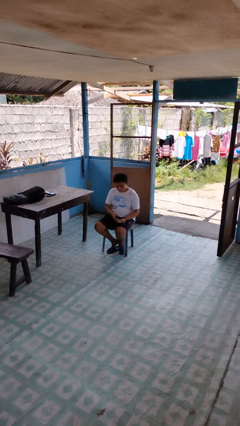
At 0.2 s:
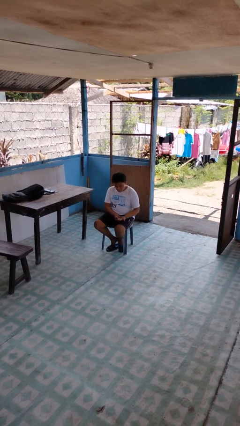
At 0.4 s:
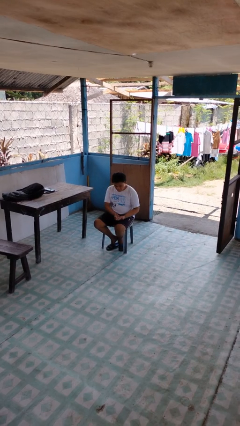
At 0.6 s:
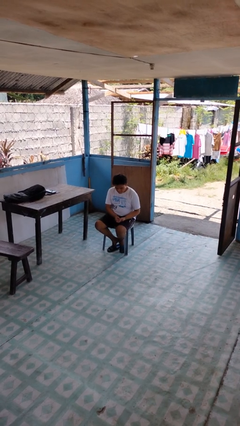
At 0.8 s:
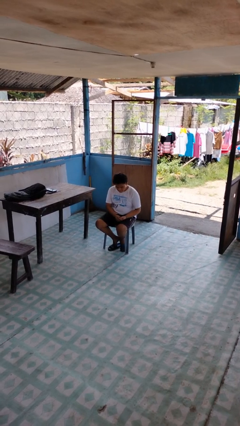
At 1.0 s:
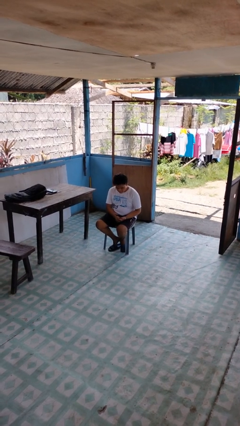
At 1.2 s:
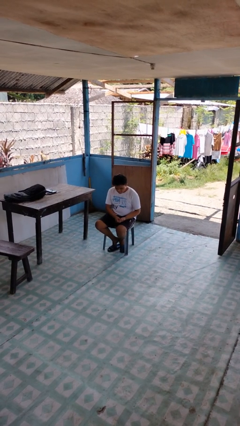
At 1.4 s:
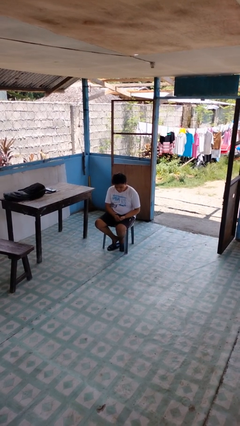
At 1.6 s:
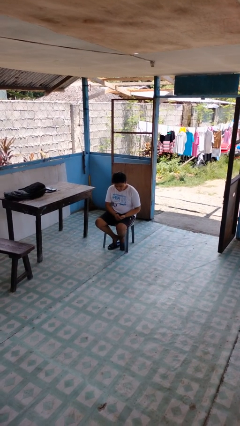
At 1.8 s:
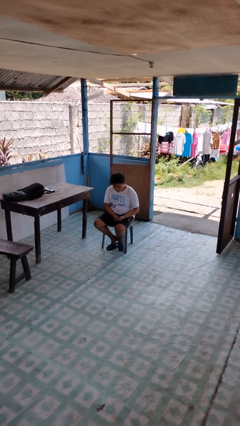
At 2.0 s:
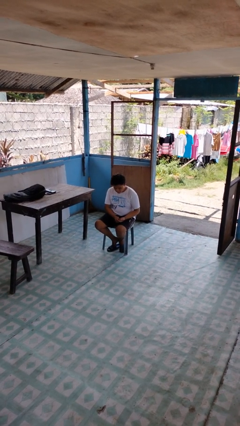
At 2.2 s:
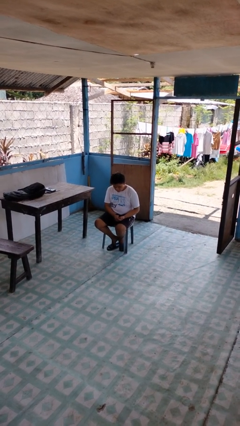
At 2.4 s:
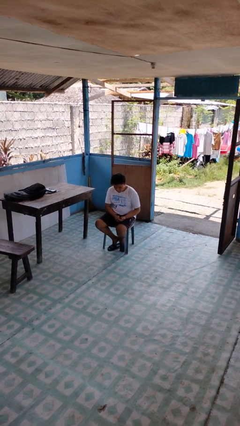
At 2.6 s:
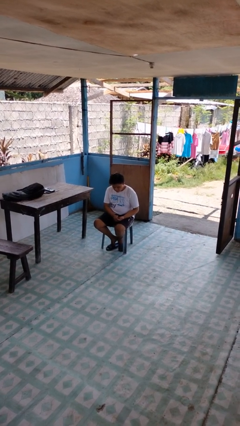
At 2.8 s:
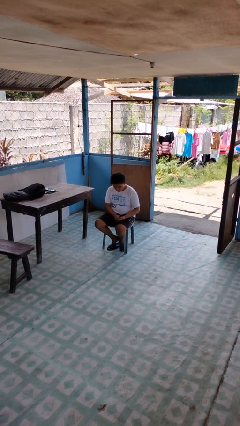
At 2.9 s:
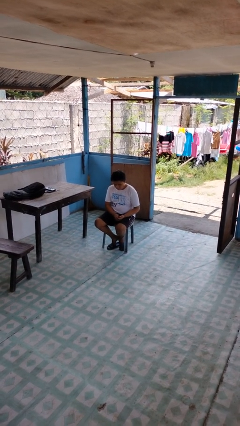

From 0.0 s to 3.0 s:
person looks at hands in lap

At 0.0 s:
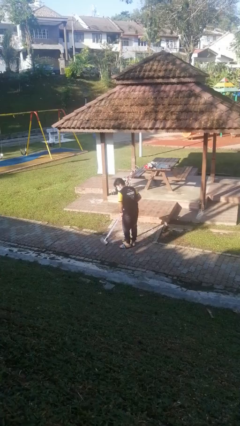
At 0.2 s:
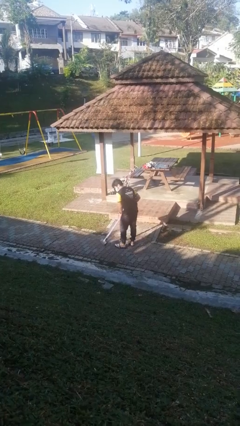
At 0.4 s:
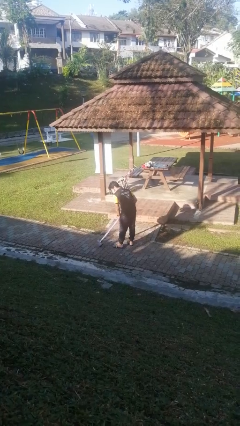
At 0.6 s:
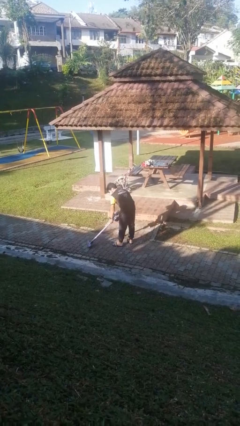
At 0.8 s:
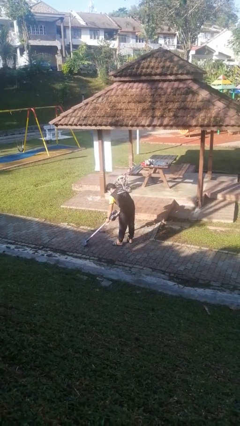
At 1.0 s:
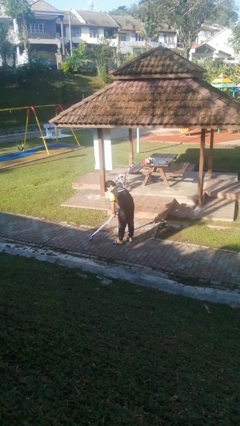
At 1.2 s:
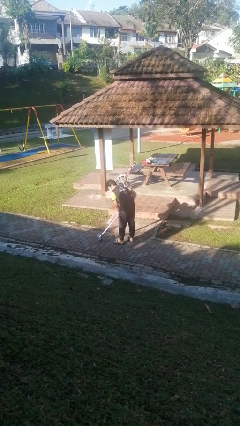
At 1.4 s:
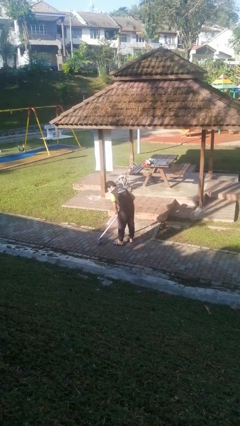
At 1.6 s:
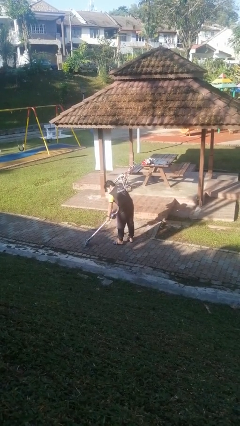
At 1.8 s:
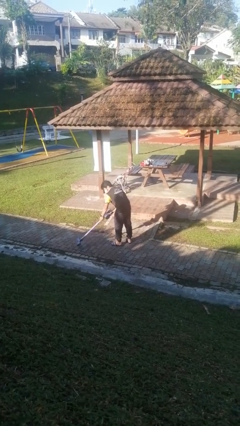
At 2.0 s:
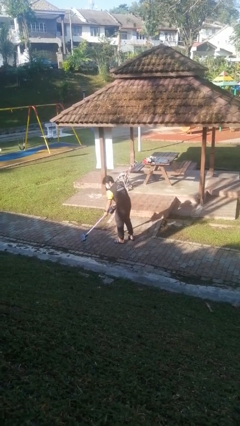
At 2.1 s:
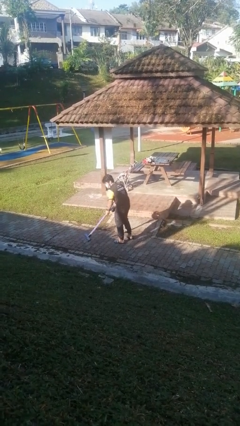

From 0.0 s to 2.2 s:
person vacuums carpet

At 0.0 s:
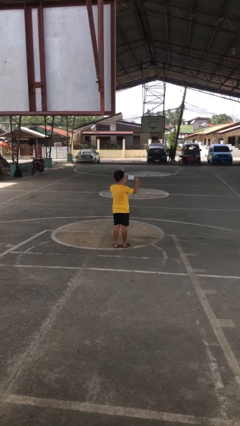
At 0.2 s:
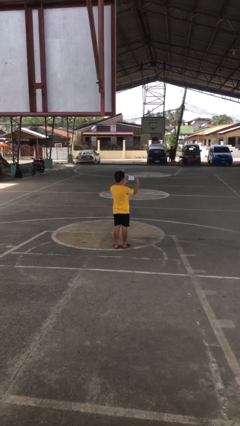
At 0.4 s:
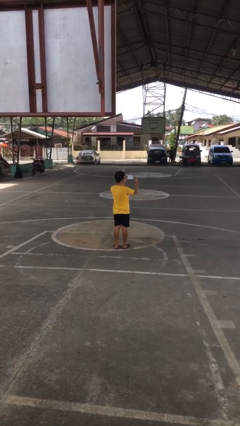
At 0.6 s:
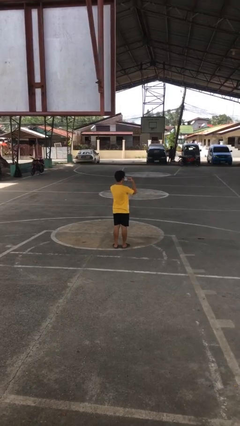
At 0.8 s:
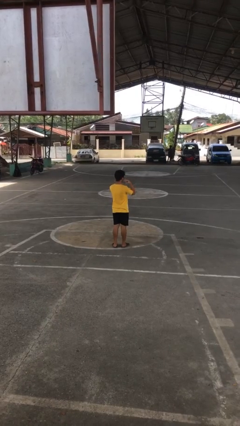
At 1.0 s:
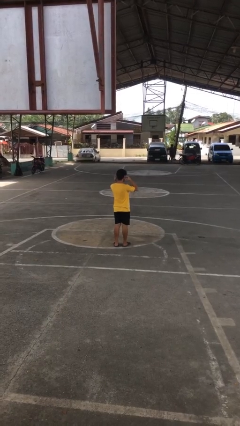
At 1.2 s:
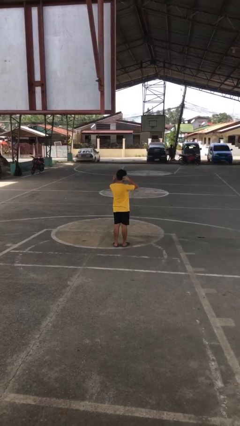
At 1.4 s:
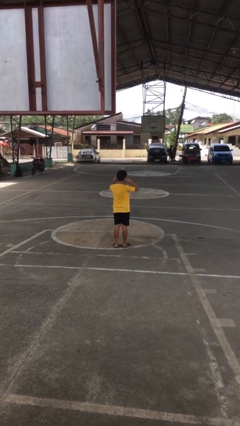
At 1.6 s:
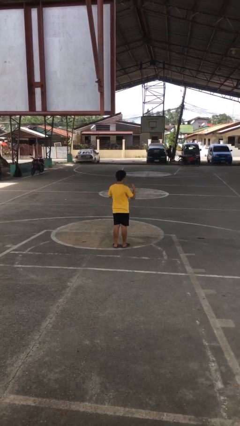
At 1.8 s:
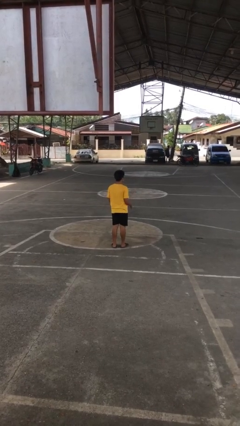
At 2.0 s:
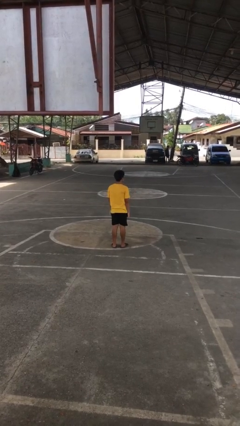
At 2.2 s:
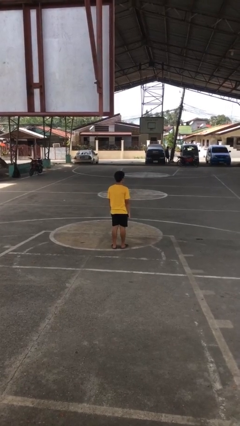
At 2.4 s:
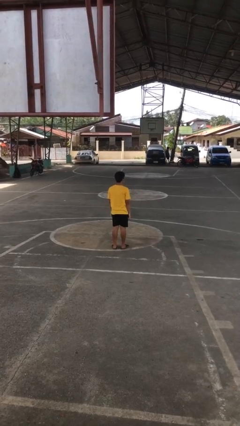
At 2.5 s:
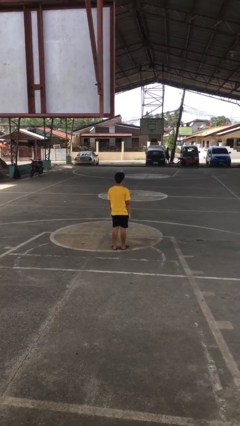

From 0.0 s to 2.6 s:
person puts on facemask

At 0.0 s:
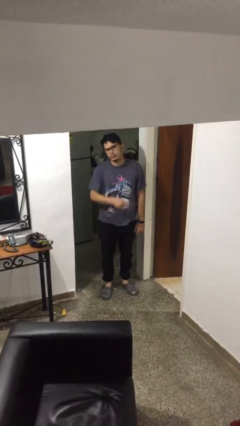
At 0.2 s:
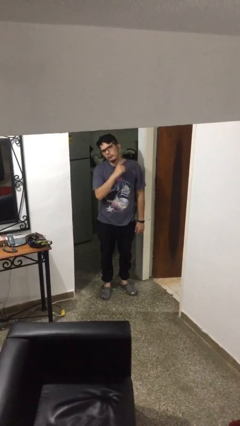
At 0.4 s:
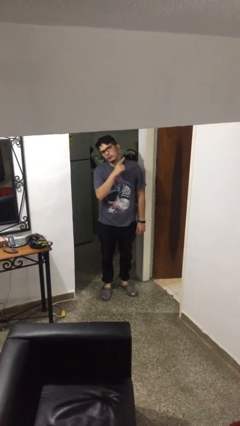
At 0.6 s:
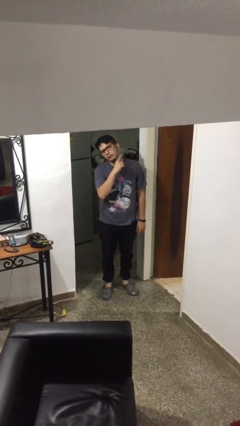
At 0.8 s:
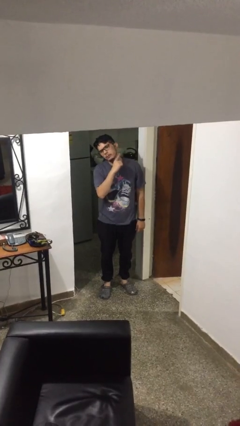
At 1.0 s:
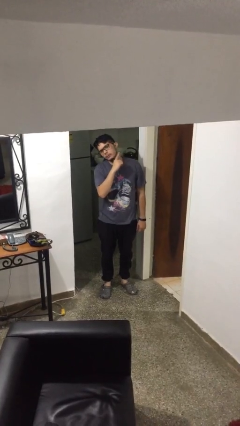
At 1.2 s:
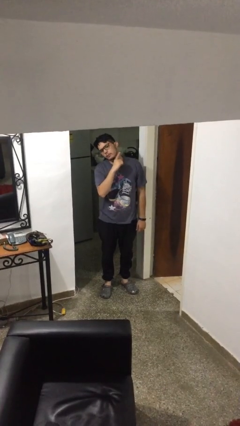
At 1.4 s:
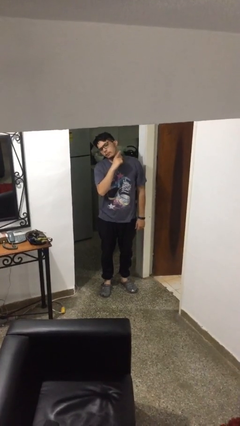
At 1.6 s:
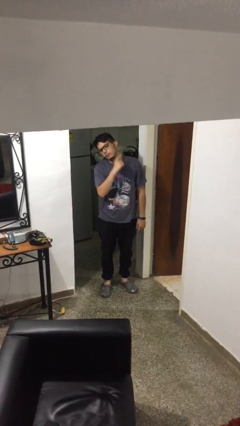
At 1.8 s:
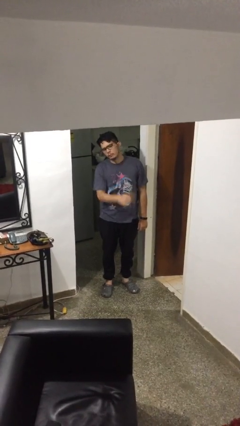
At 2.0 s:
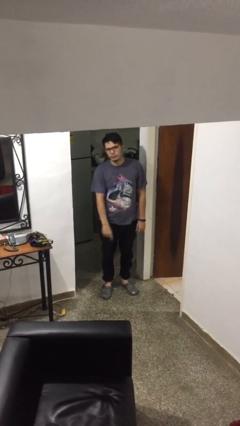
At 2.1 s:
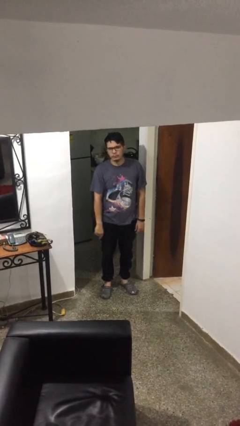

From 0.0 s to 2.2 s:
person gestures cut

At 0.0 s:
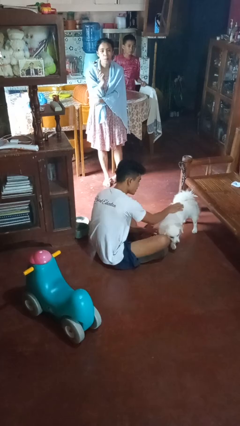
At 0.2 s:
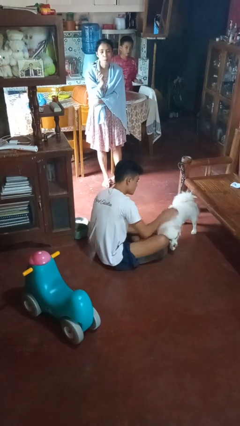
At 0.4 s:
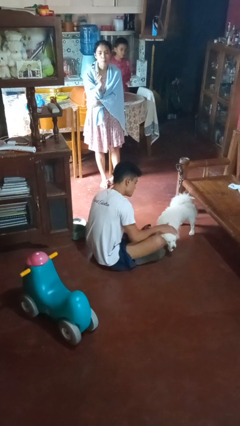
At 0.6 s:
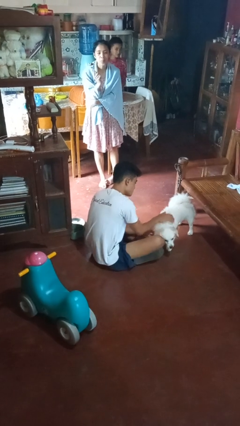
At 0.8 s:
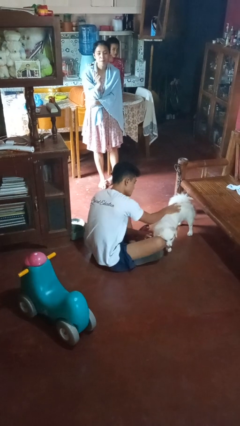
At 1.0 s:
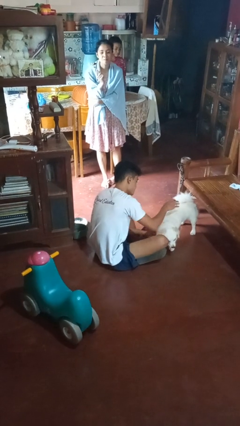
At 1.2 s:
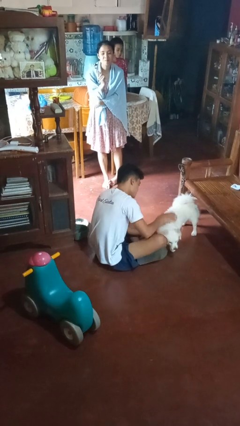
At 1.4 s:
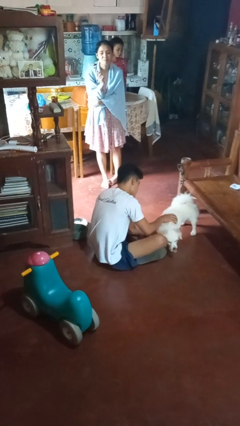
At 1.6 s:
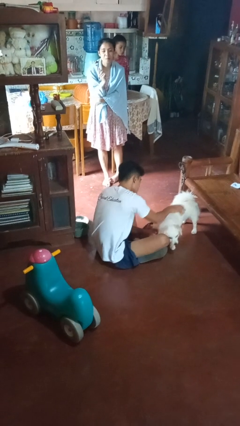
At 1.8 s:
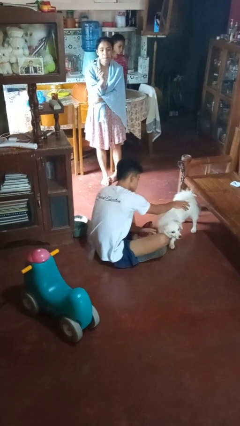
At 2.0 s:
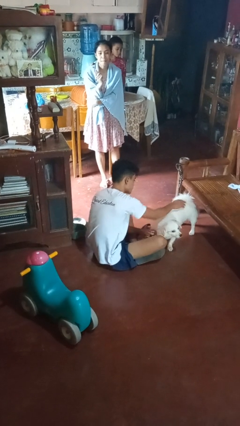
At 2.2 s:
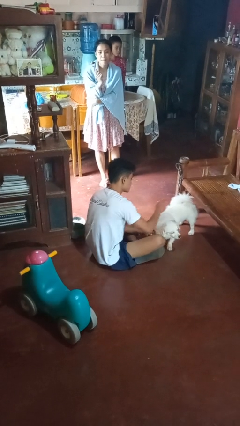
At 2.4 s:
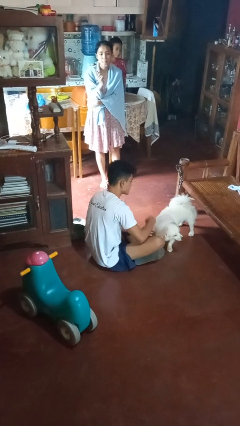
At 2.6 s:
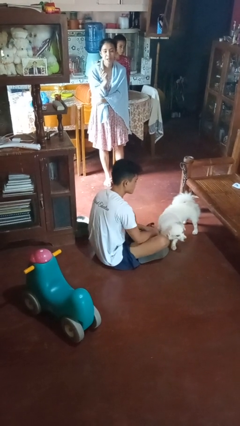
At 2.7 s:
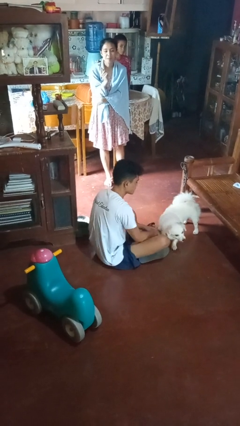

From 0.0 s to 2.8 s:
person pets dog

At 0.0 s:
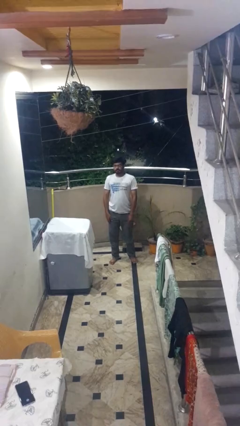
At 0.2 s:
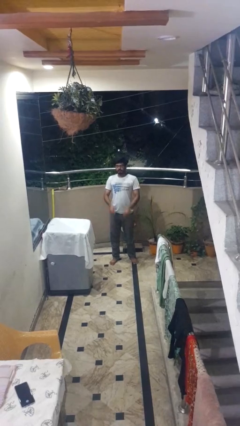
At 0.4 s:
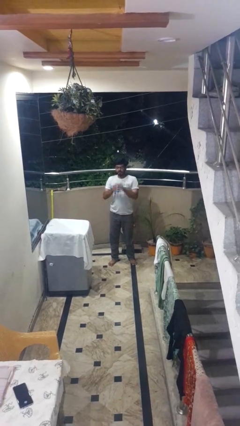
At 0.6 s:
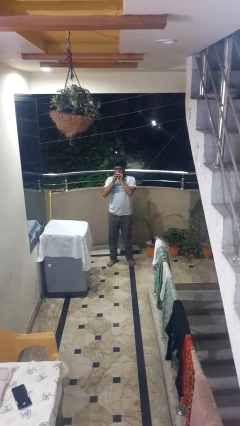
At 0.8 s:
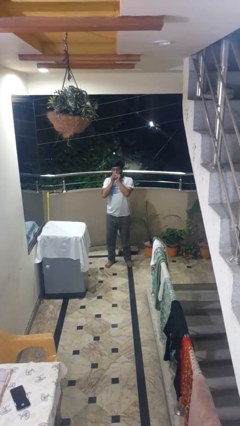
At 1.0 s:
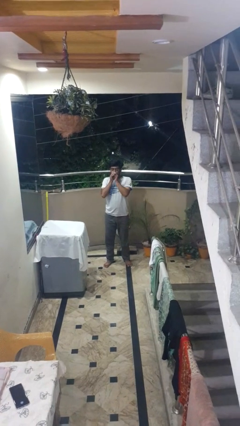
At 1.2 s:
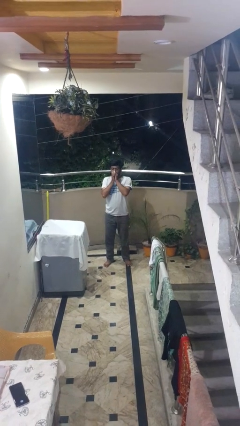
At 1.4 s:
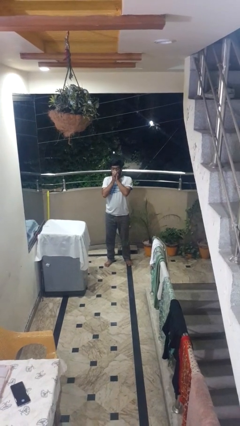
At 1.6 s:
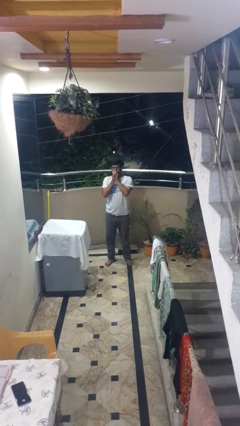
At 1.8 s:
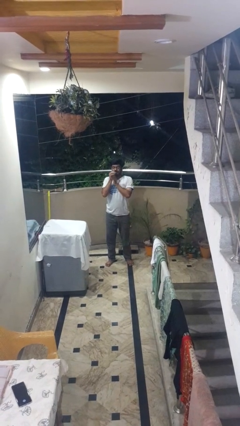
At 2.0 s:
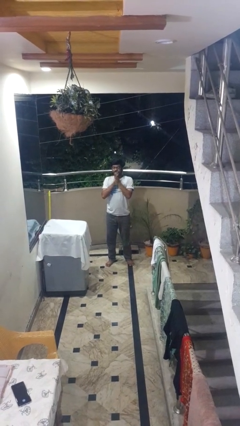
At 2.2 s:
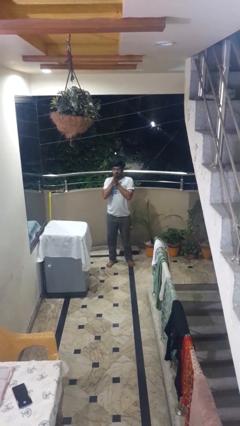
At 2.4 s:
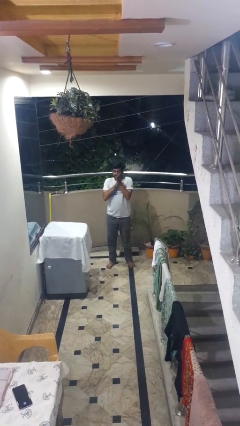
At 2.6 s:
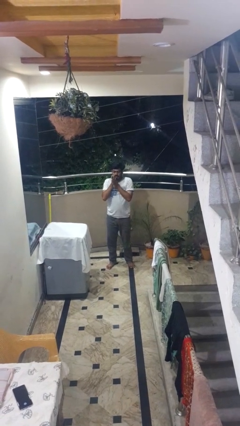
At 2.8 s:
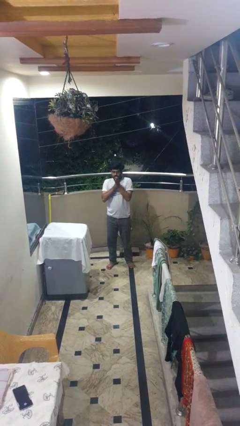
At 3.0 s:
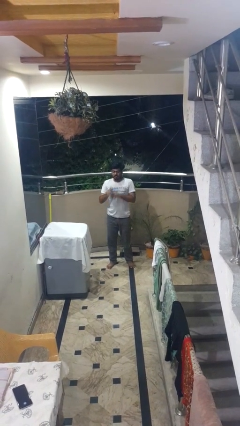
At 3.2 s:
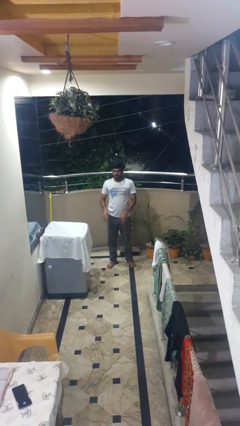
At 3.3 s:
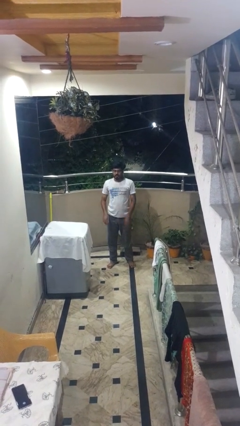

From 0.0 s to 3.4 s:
person blows into hands

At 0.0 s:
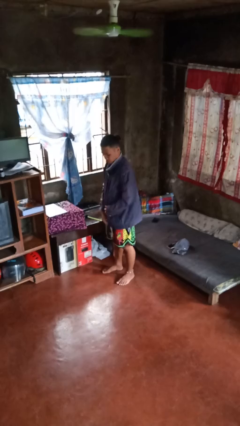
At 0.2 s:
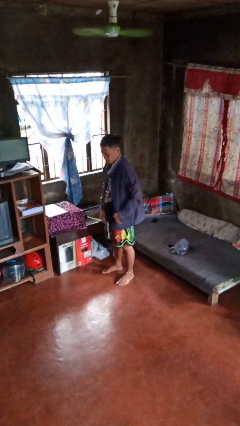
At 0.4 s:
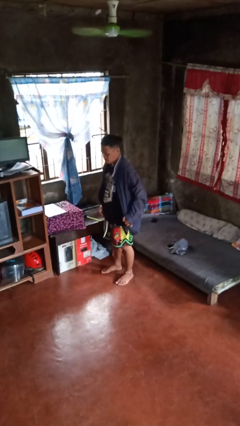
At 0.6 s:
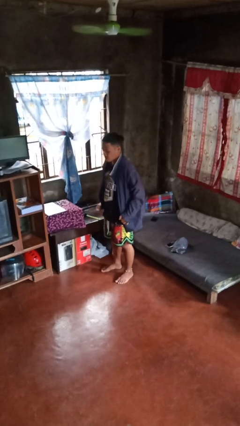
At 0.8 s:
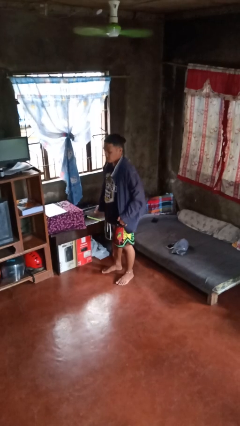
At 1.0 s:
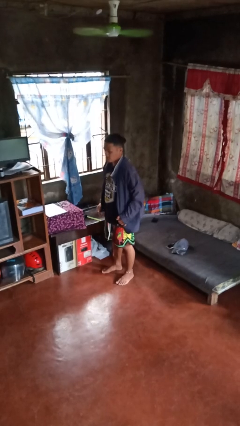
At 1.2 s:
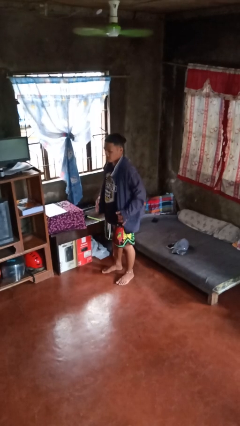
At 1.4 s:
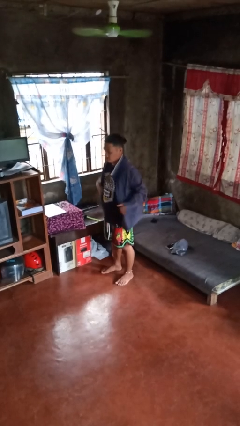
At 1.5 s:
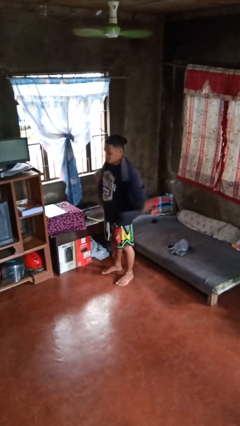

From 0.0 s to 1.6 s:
person unzips jacket
